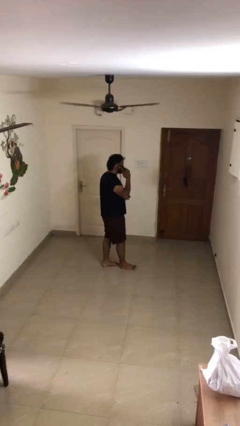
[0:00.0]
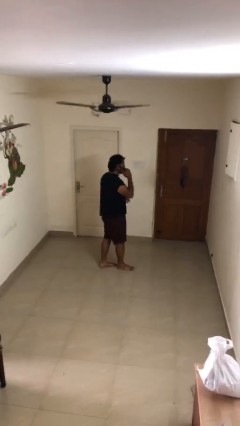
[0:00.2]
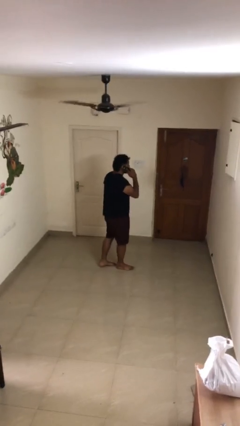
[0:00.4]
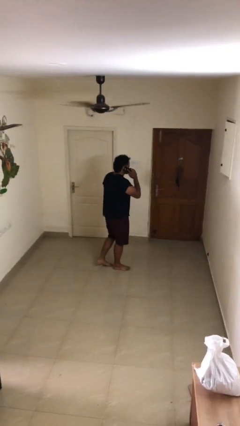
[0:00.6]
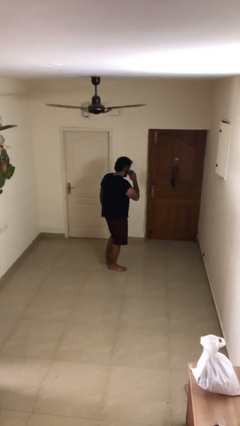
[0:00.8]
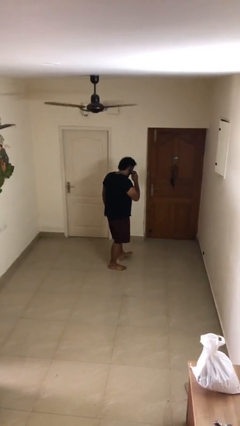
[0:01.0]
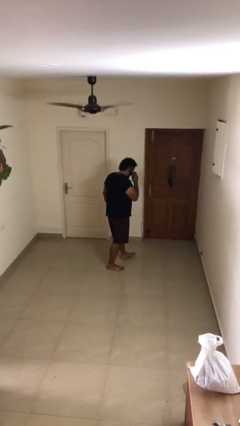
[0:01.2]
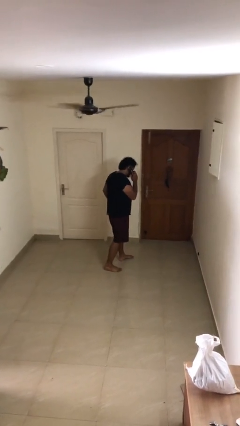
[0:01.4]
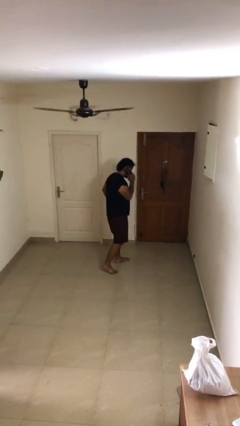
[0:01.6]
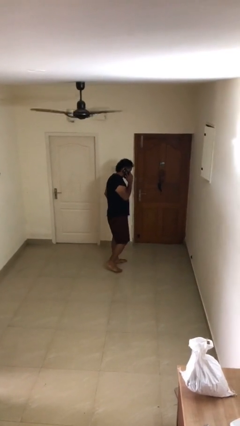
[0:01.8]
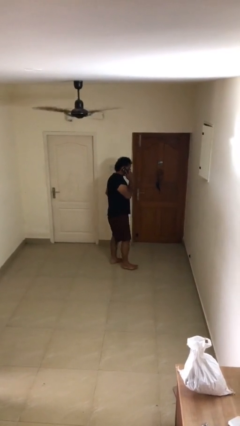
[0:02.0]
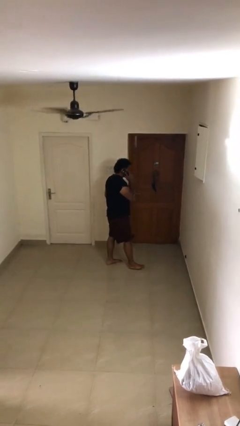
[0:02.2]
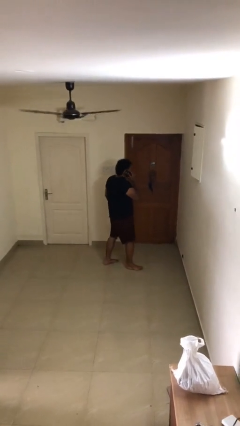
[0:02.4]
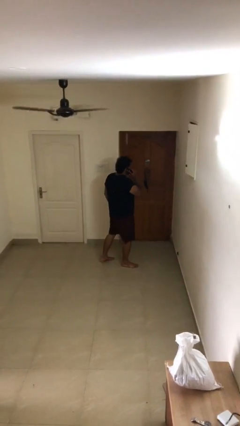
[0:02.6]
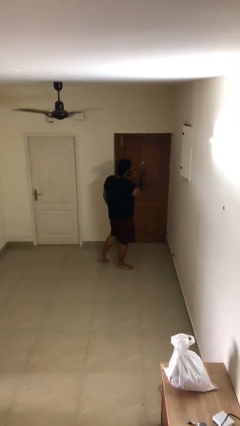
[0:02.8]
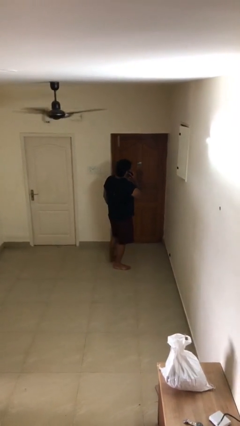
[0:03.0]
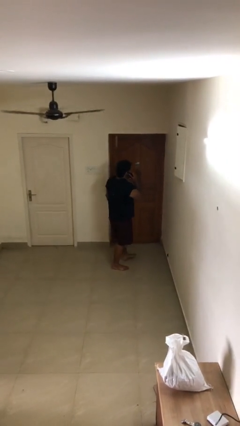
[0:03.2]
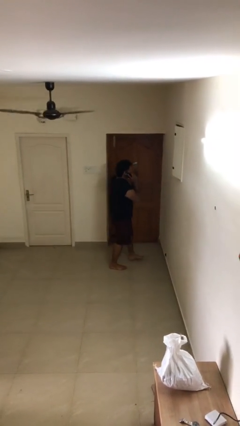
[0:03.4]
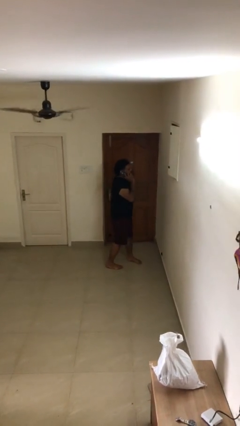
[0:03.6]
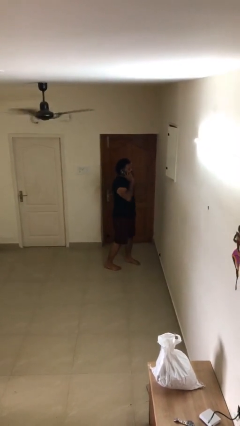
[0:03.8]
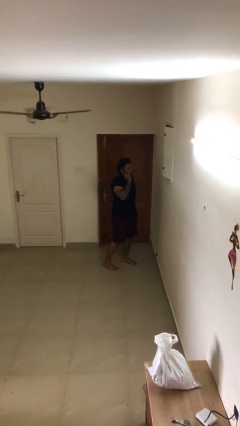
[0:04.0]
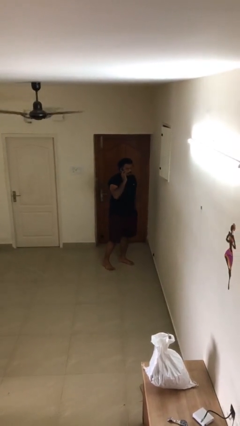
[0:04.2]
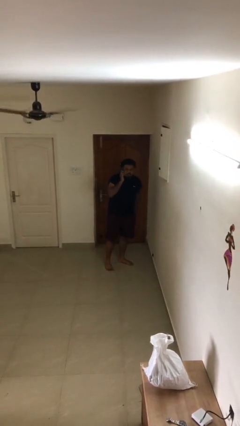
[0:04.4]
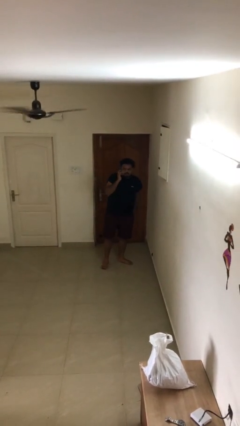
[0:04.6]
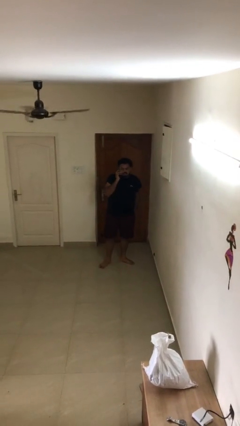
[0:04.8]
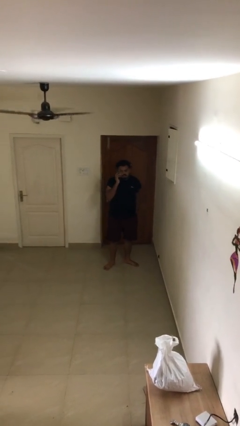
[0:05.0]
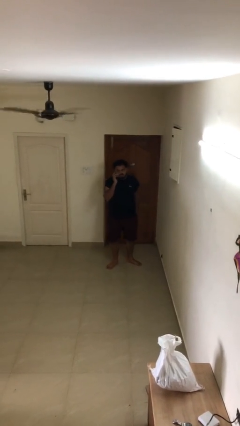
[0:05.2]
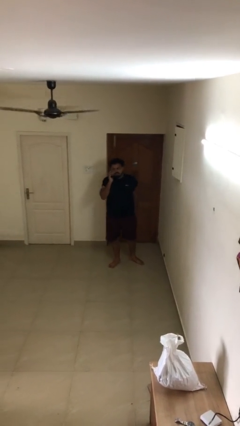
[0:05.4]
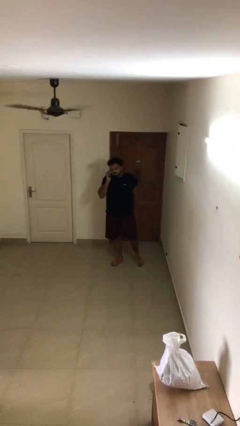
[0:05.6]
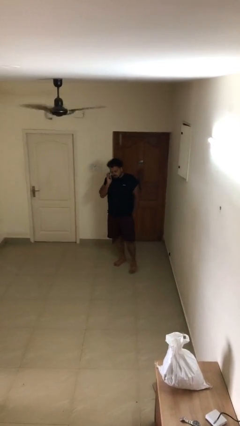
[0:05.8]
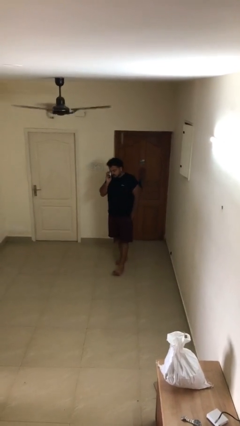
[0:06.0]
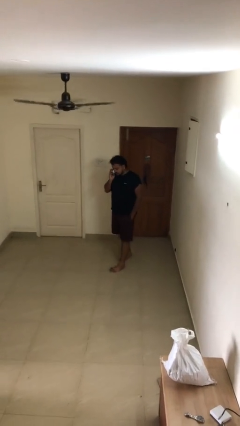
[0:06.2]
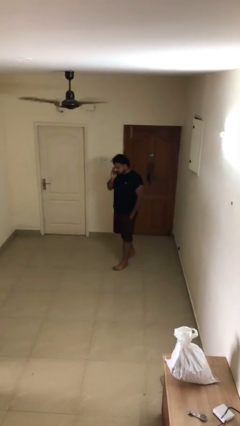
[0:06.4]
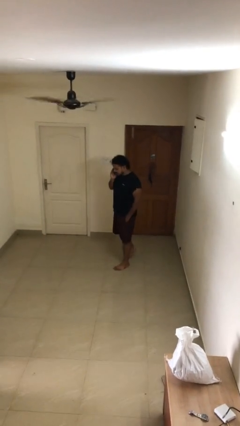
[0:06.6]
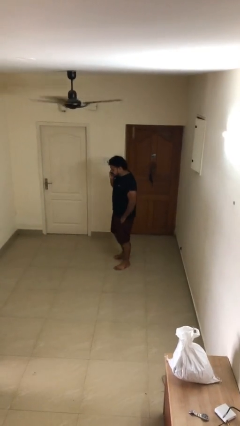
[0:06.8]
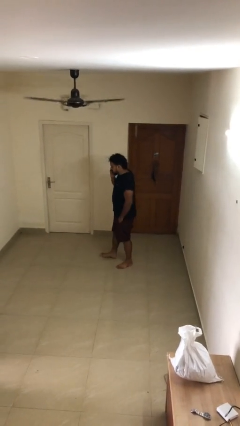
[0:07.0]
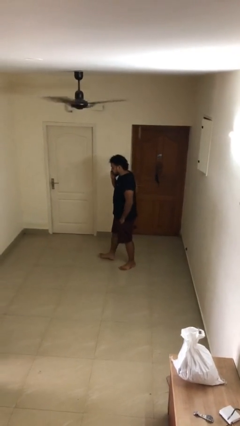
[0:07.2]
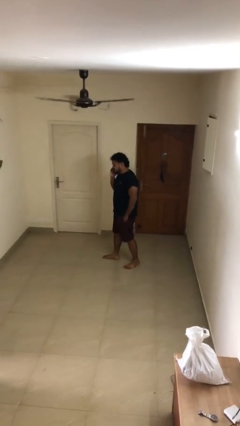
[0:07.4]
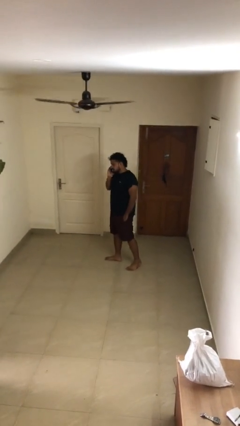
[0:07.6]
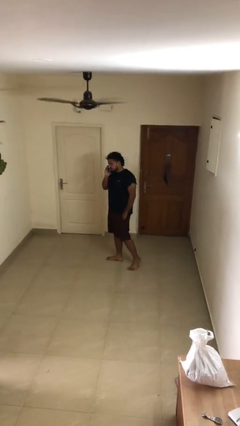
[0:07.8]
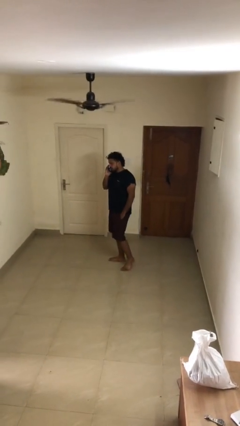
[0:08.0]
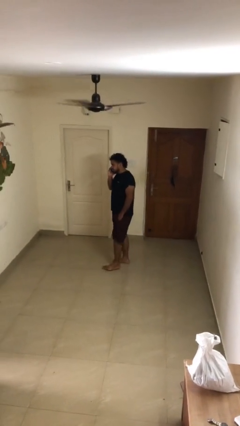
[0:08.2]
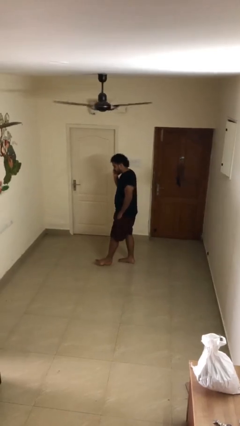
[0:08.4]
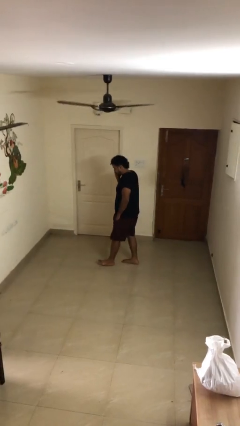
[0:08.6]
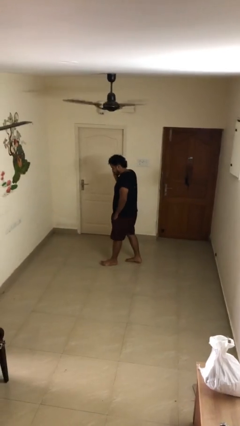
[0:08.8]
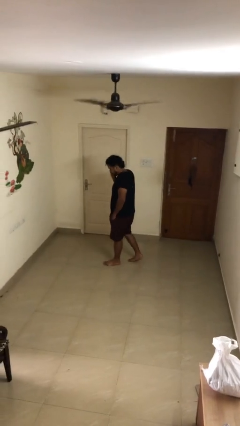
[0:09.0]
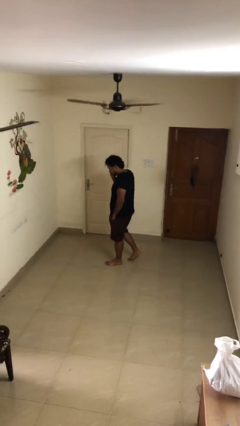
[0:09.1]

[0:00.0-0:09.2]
person talks on phone

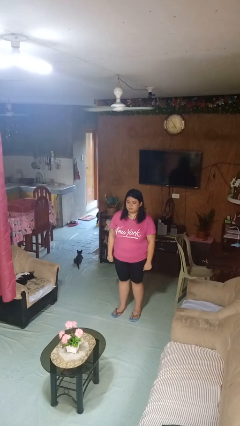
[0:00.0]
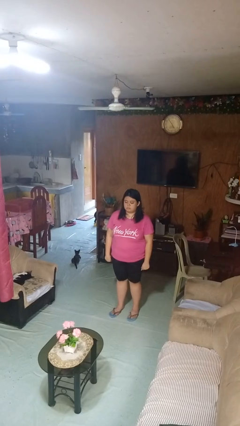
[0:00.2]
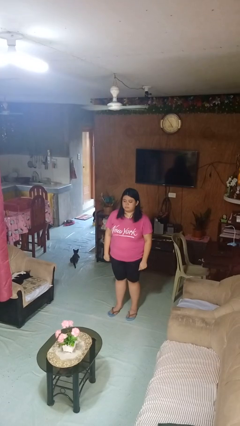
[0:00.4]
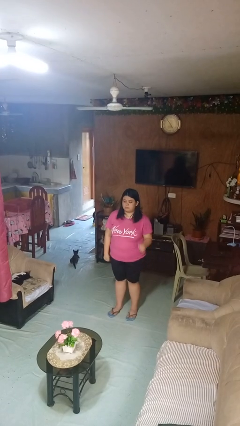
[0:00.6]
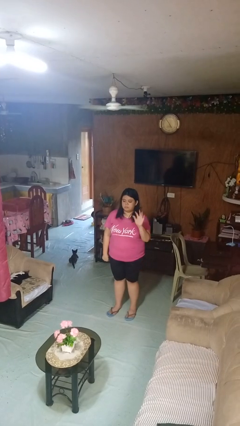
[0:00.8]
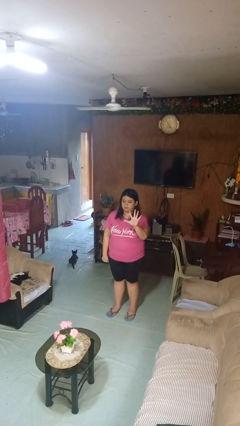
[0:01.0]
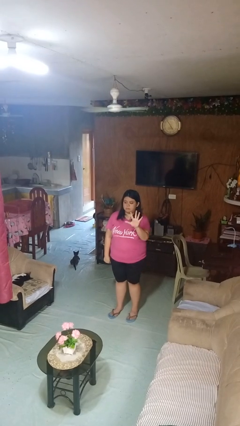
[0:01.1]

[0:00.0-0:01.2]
person gestures number five

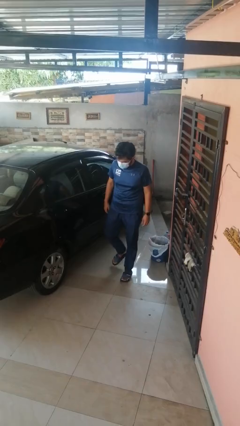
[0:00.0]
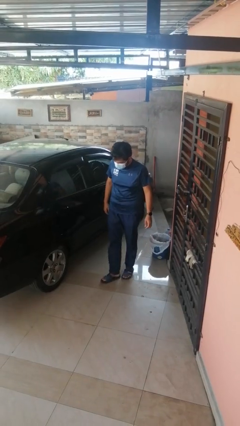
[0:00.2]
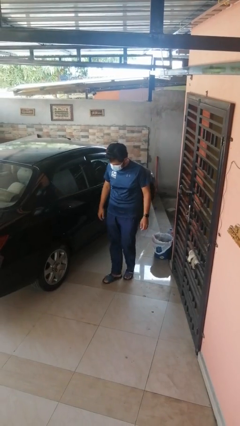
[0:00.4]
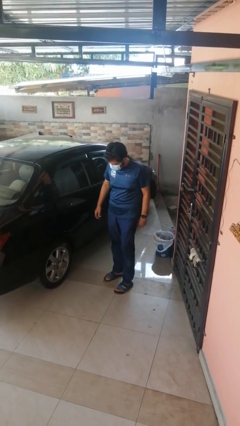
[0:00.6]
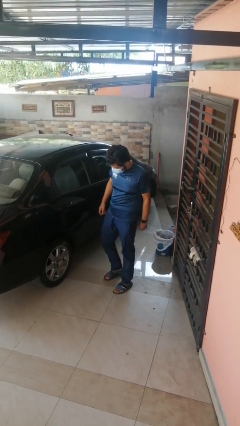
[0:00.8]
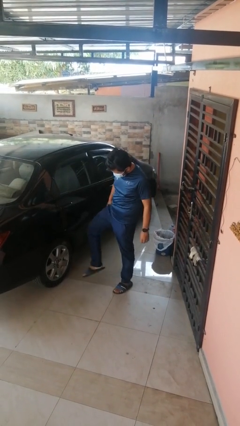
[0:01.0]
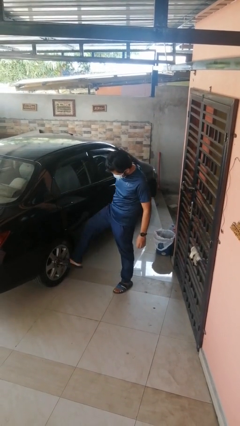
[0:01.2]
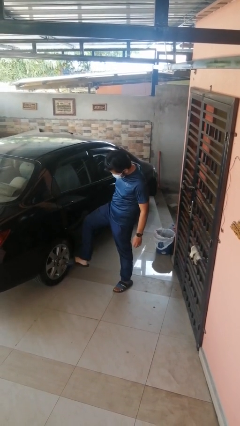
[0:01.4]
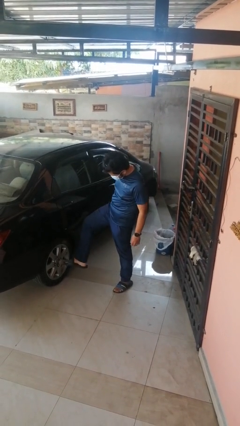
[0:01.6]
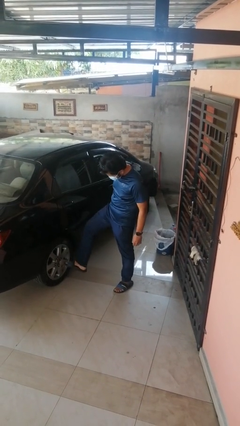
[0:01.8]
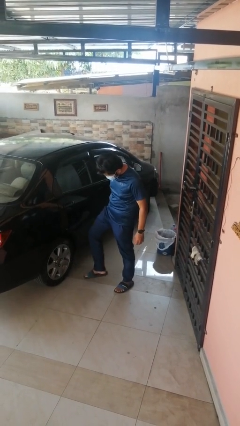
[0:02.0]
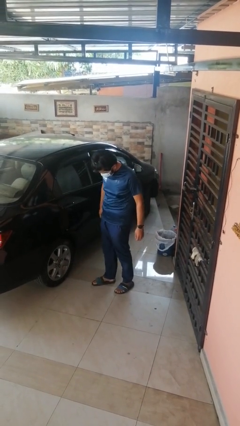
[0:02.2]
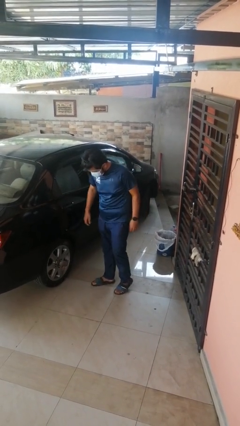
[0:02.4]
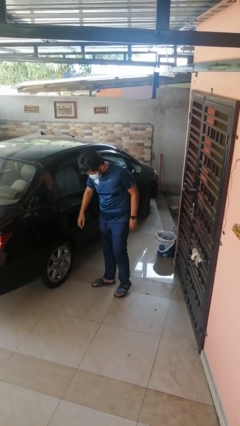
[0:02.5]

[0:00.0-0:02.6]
person kicks car tires

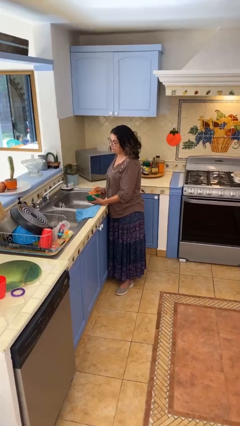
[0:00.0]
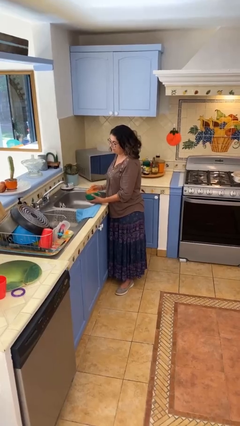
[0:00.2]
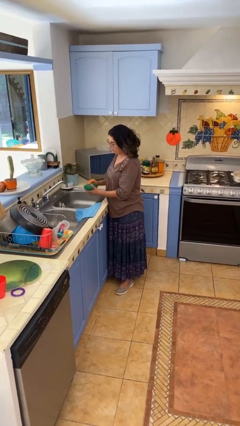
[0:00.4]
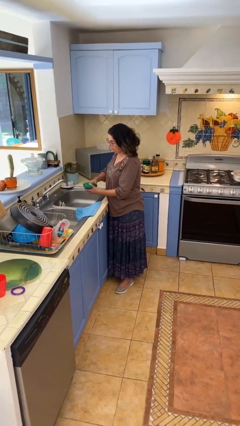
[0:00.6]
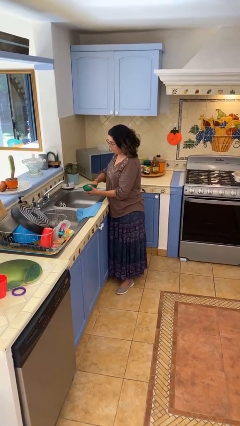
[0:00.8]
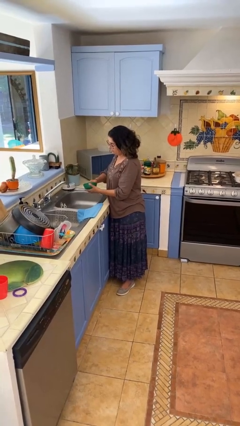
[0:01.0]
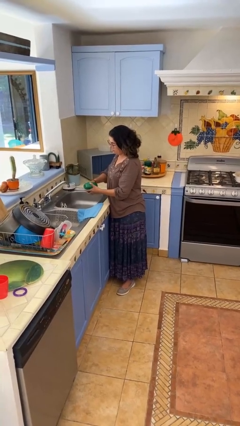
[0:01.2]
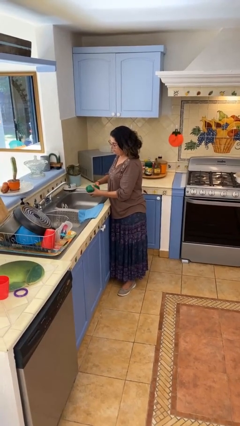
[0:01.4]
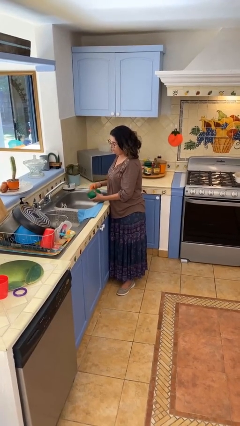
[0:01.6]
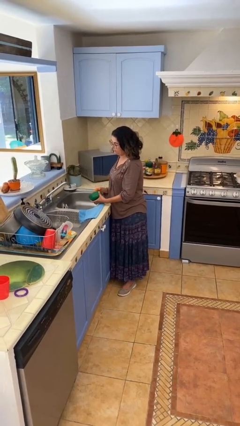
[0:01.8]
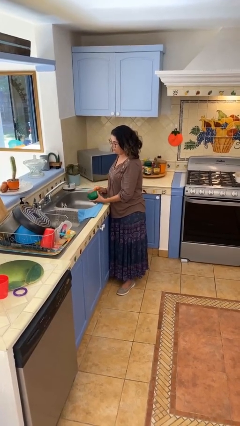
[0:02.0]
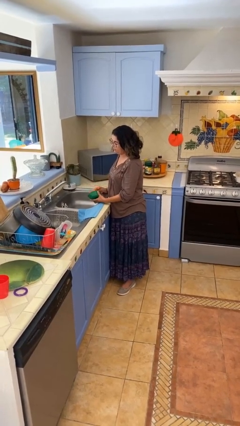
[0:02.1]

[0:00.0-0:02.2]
person washes dish

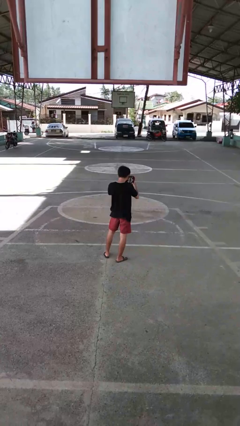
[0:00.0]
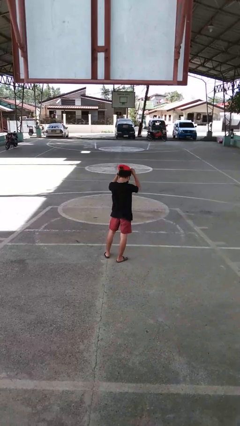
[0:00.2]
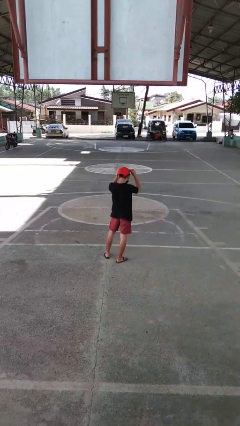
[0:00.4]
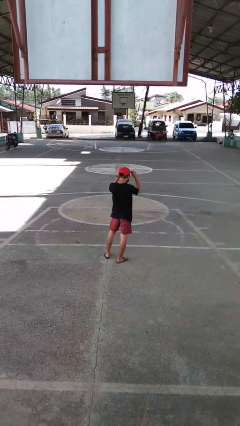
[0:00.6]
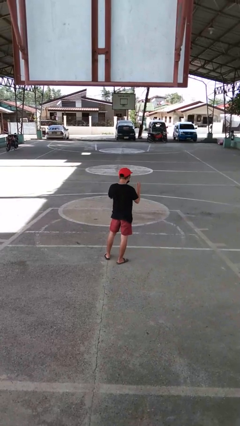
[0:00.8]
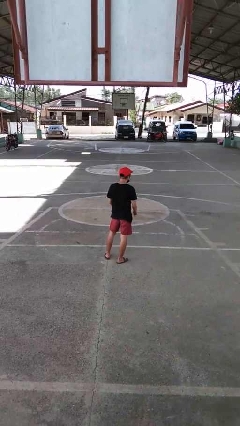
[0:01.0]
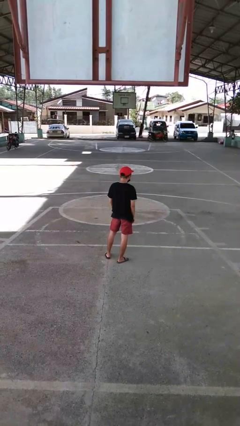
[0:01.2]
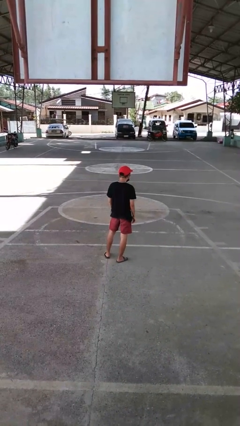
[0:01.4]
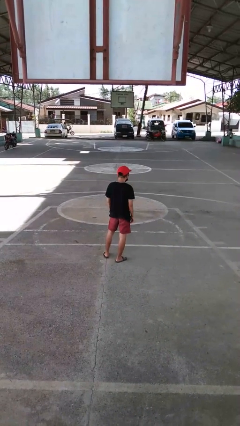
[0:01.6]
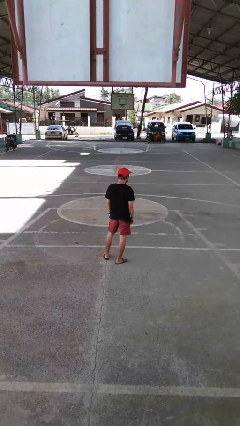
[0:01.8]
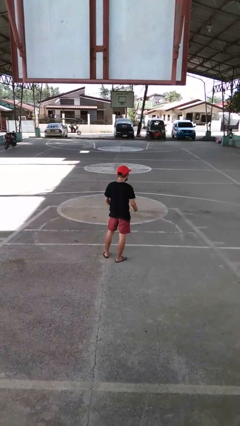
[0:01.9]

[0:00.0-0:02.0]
person puts on hat

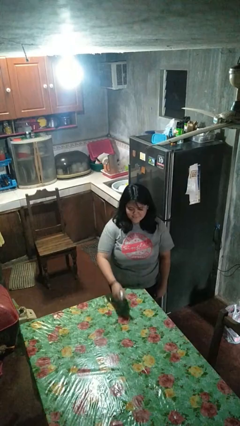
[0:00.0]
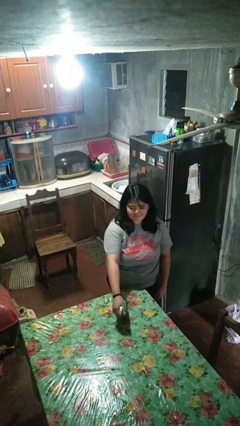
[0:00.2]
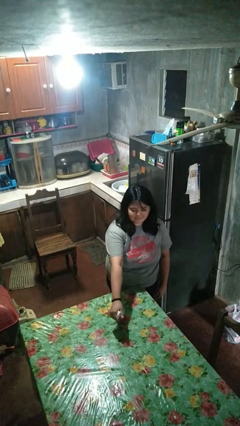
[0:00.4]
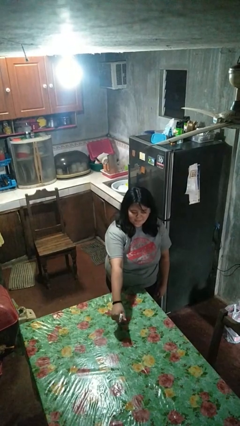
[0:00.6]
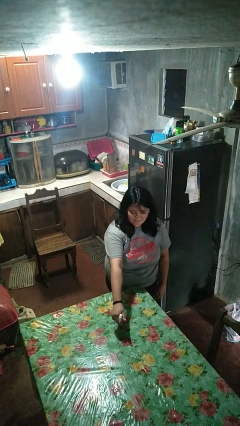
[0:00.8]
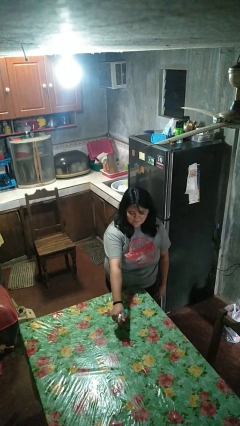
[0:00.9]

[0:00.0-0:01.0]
person sprays from bottle
